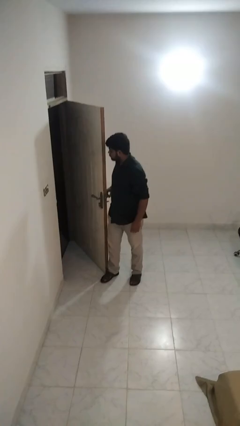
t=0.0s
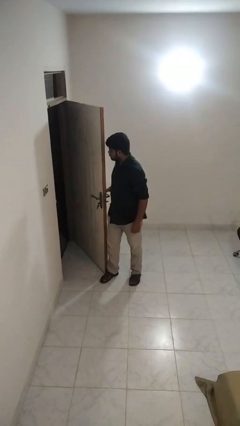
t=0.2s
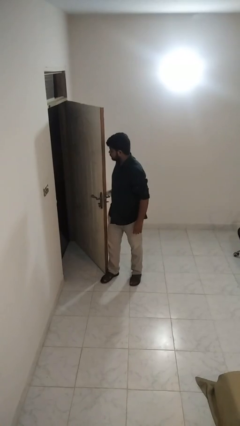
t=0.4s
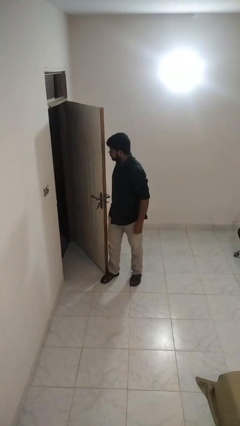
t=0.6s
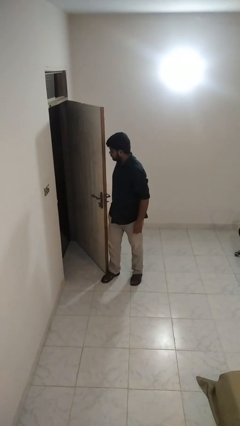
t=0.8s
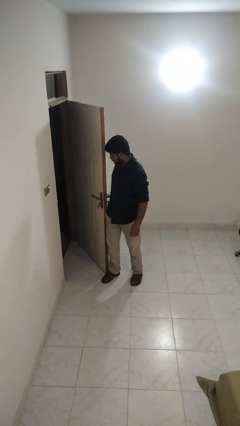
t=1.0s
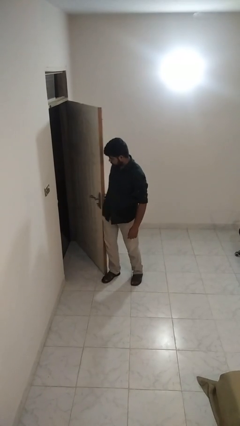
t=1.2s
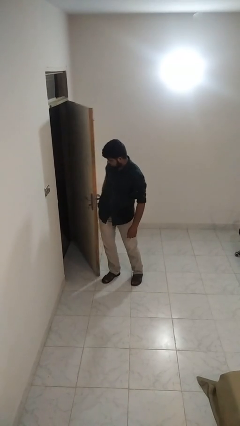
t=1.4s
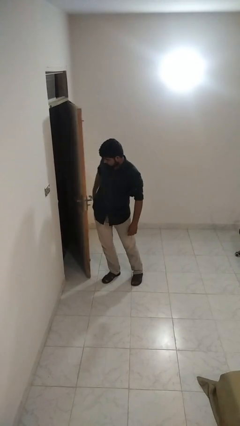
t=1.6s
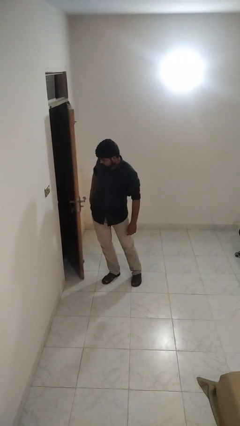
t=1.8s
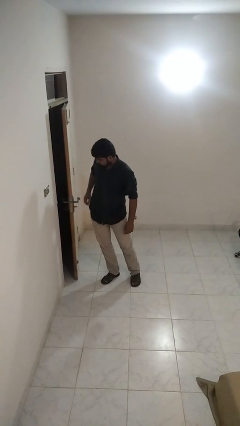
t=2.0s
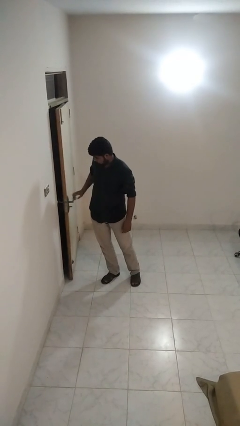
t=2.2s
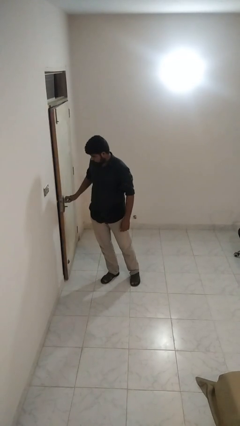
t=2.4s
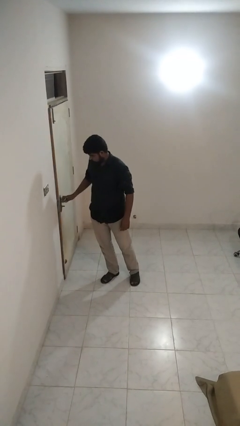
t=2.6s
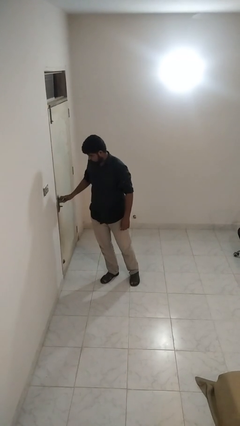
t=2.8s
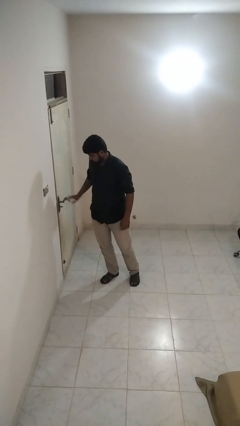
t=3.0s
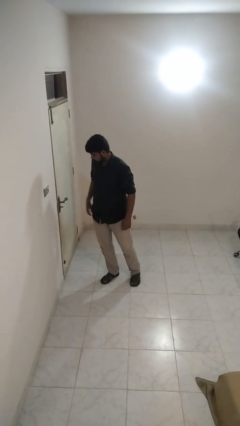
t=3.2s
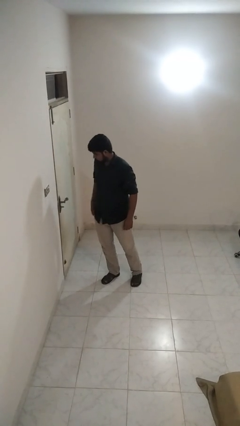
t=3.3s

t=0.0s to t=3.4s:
person closes door with hip

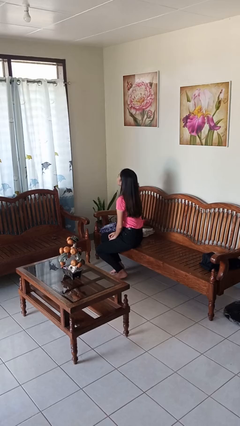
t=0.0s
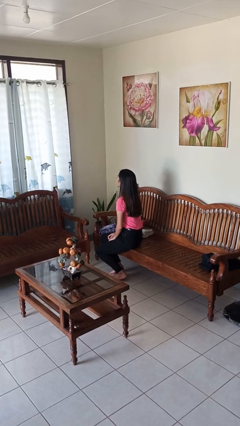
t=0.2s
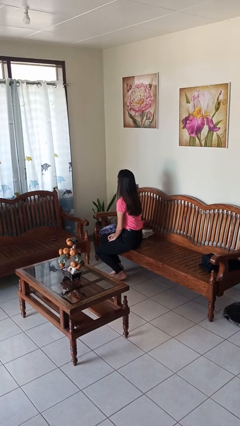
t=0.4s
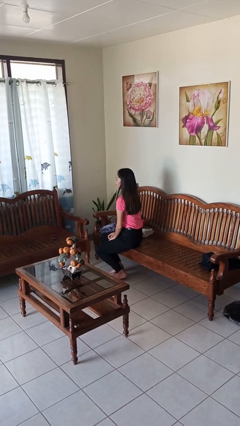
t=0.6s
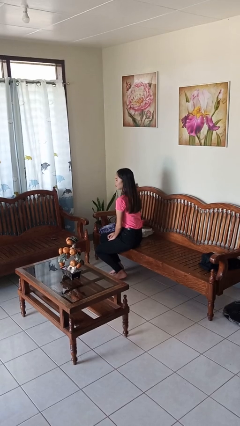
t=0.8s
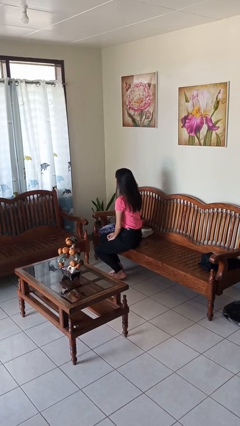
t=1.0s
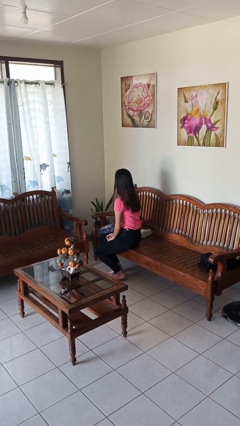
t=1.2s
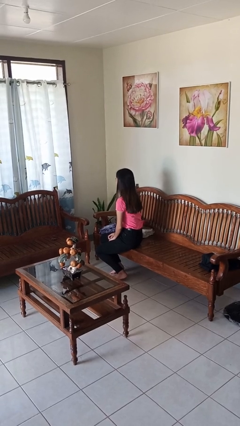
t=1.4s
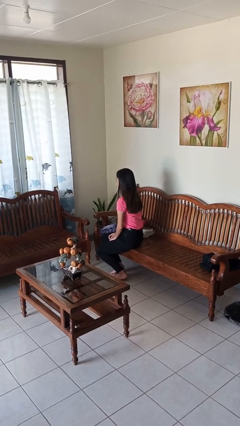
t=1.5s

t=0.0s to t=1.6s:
person shakes head

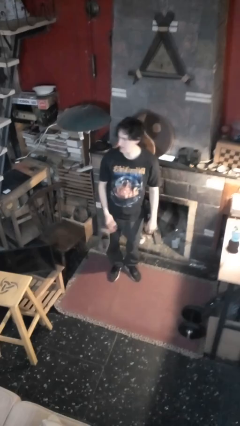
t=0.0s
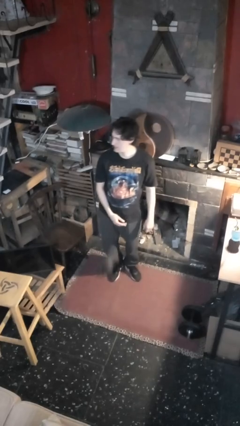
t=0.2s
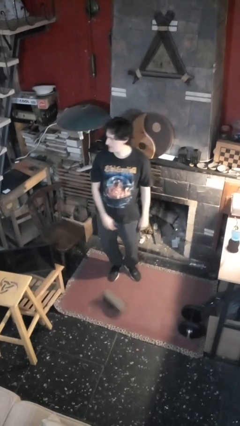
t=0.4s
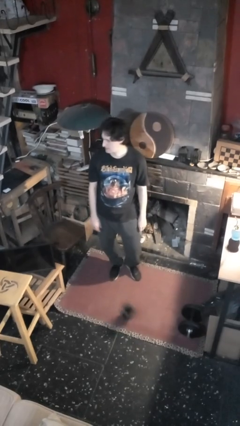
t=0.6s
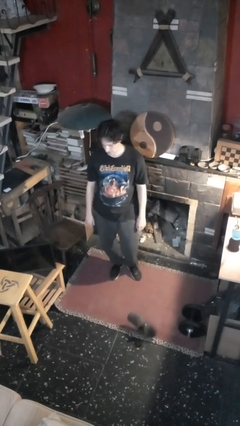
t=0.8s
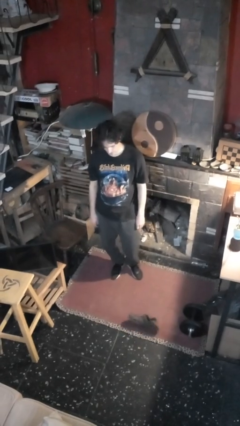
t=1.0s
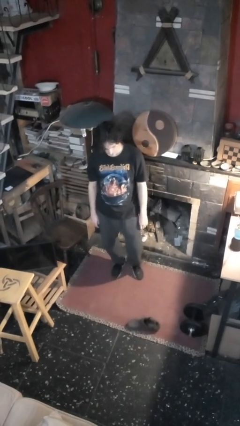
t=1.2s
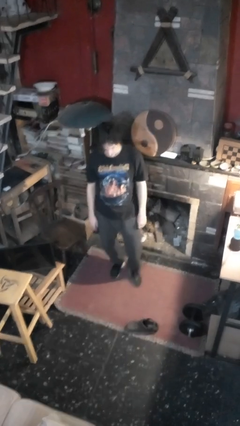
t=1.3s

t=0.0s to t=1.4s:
person drops object

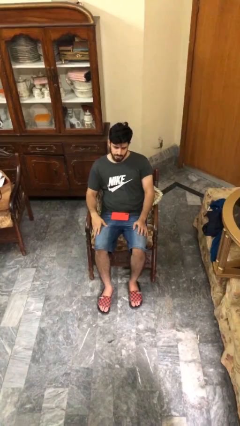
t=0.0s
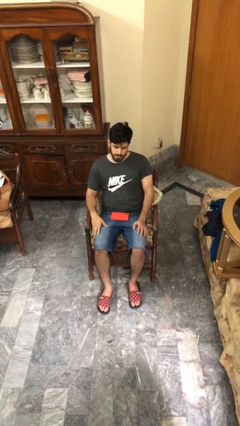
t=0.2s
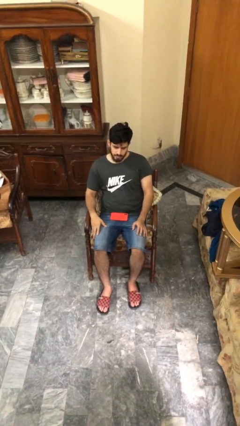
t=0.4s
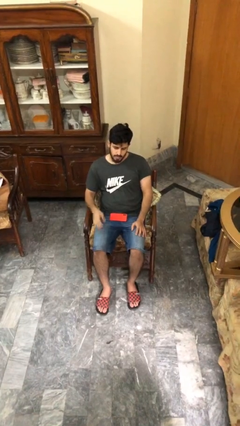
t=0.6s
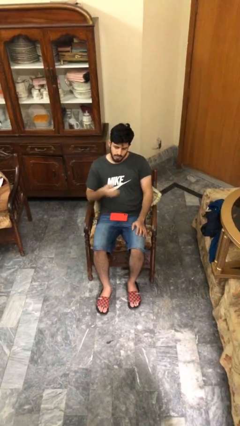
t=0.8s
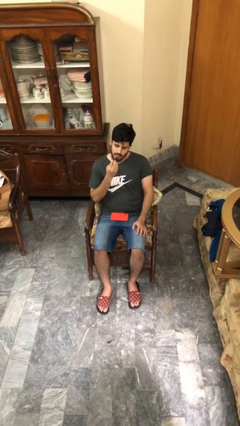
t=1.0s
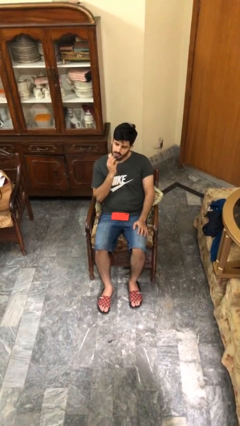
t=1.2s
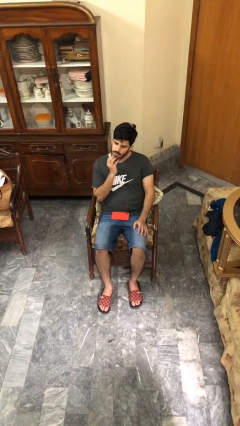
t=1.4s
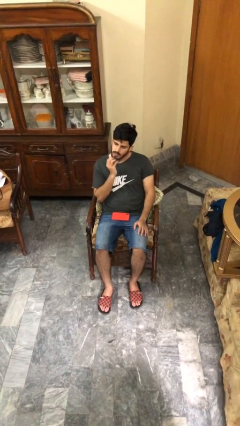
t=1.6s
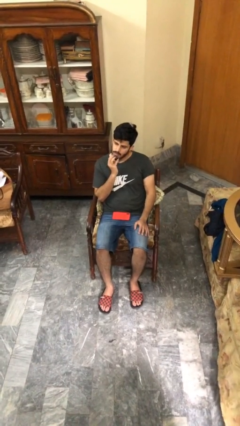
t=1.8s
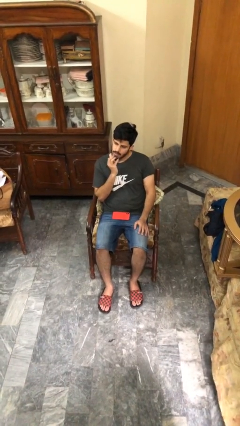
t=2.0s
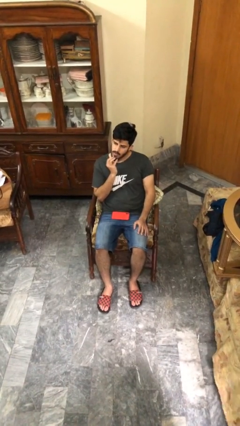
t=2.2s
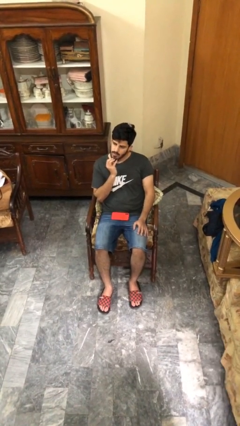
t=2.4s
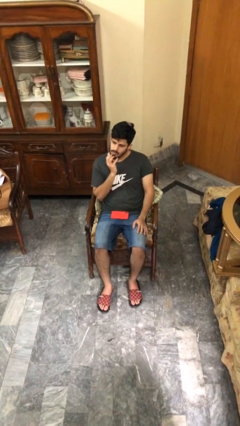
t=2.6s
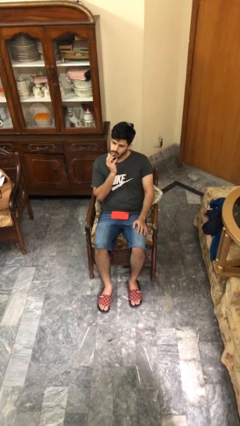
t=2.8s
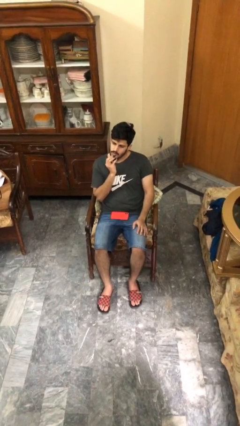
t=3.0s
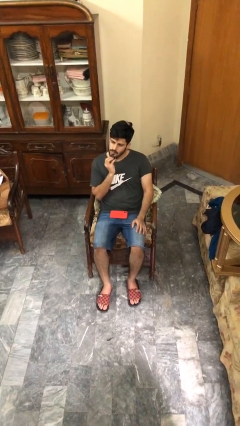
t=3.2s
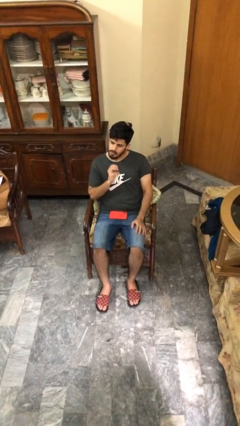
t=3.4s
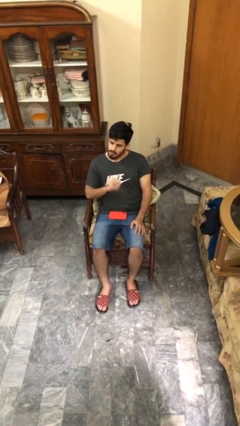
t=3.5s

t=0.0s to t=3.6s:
person strokes chin

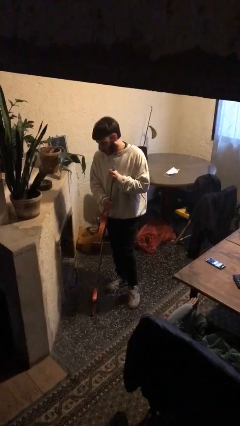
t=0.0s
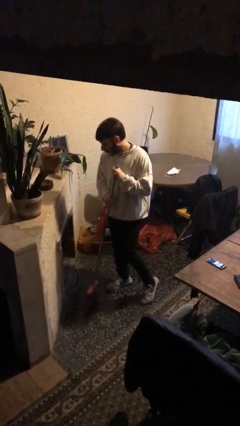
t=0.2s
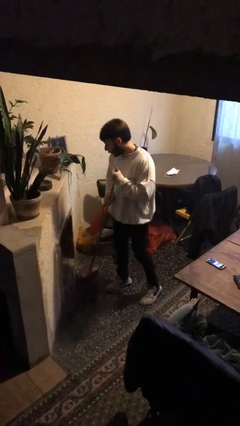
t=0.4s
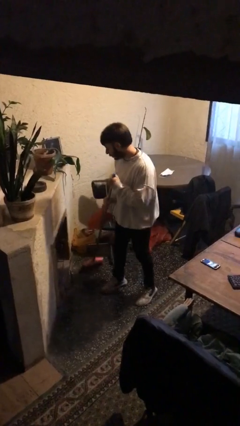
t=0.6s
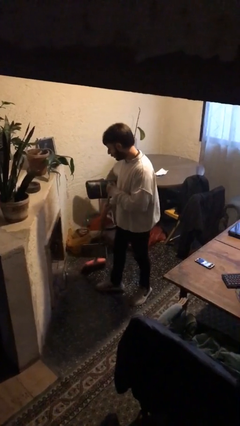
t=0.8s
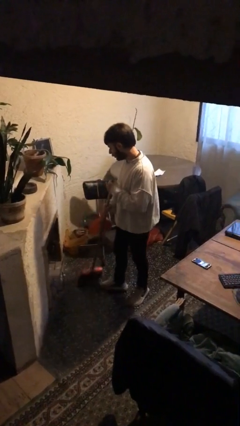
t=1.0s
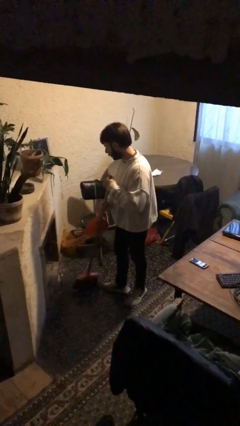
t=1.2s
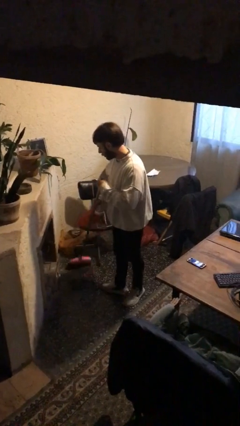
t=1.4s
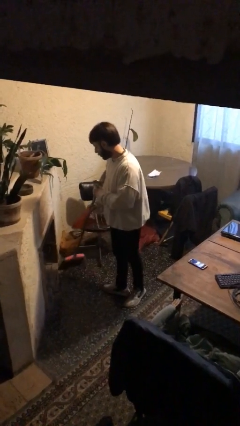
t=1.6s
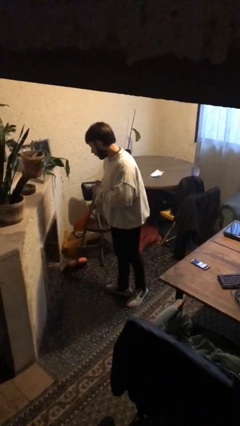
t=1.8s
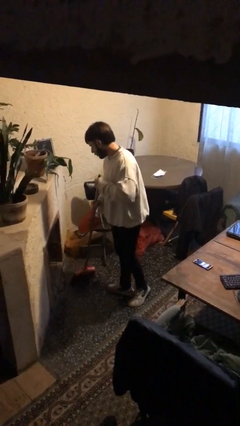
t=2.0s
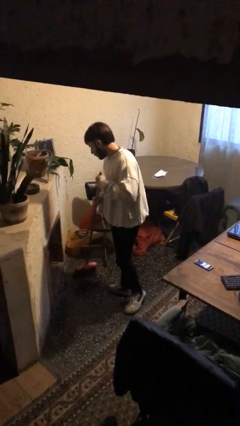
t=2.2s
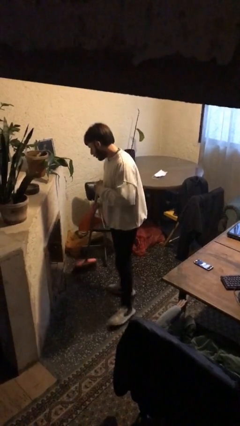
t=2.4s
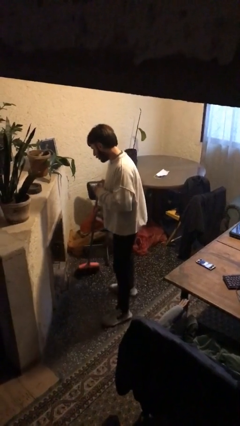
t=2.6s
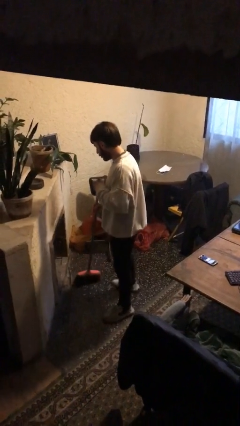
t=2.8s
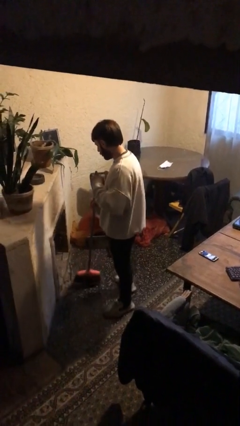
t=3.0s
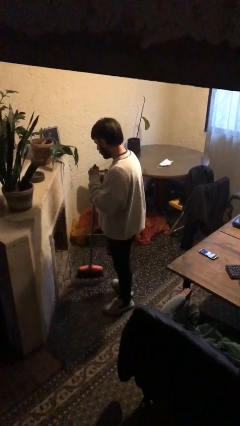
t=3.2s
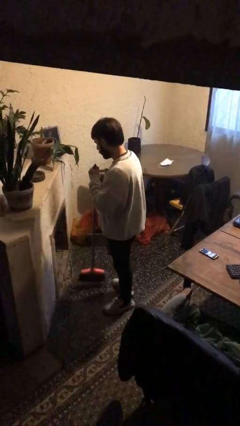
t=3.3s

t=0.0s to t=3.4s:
person sweeps floor

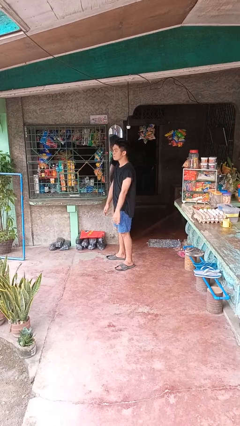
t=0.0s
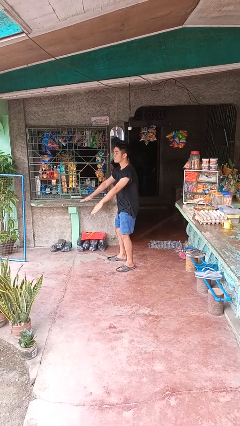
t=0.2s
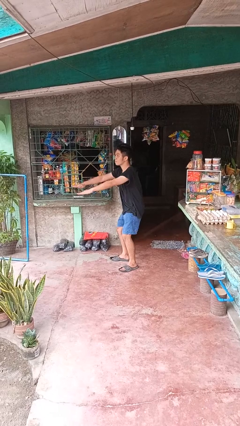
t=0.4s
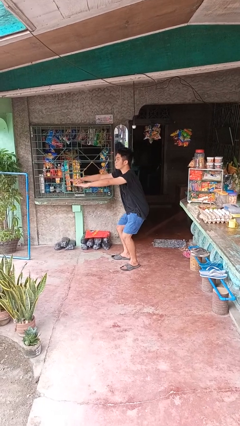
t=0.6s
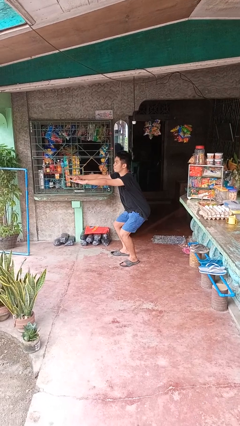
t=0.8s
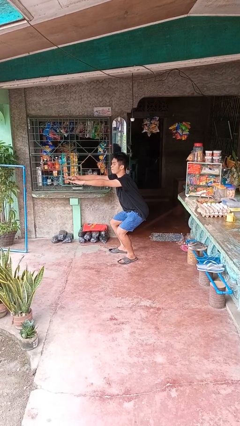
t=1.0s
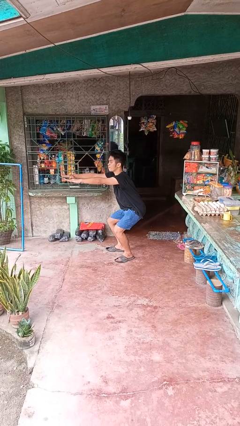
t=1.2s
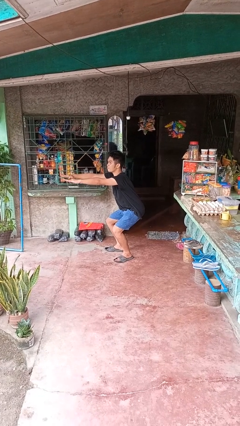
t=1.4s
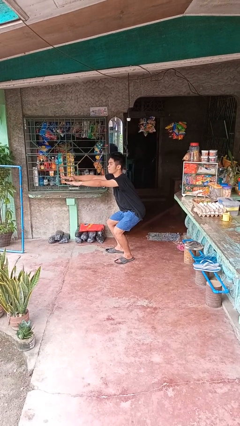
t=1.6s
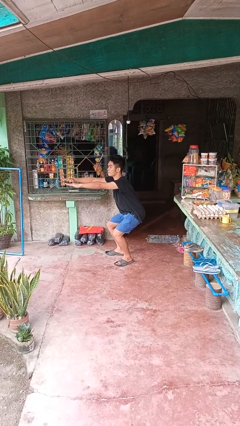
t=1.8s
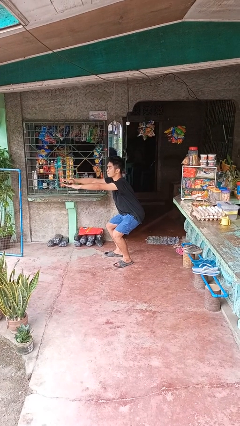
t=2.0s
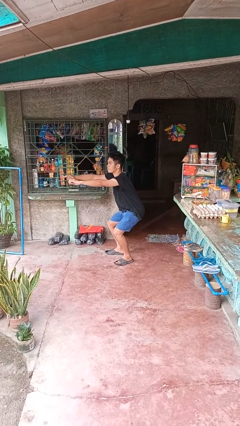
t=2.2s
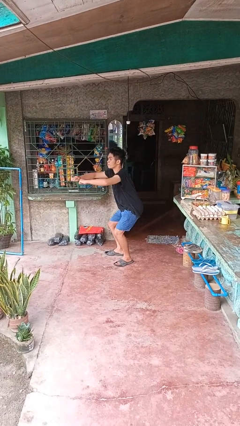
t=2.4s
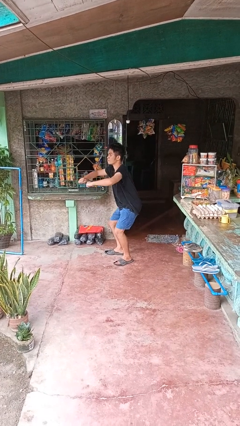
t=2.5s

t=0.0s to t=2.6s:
person squats

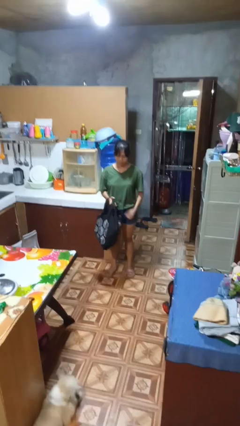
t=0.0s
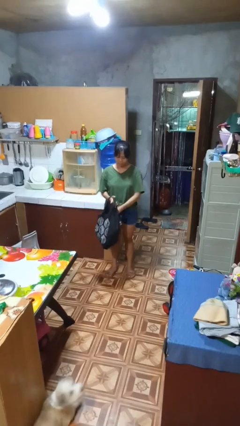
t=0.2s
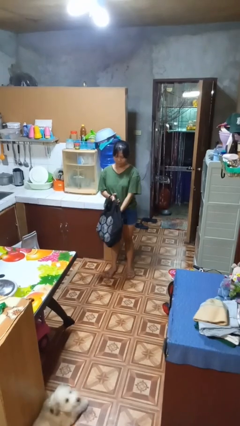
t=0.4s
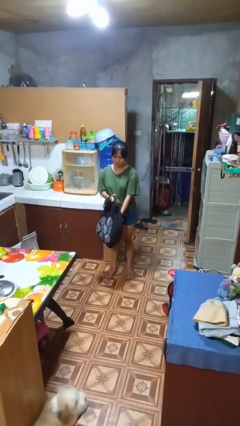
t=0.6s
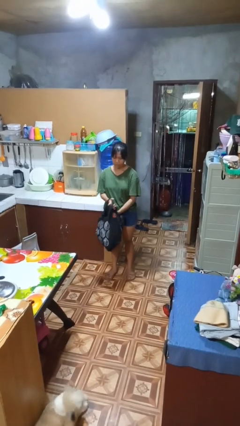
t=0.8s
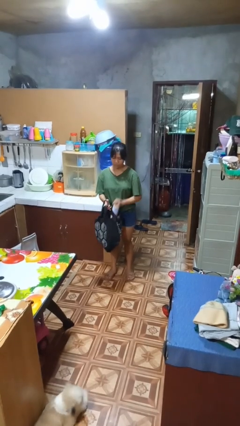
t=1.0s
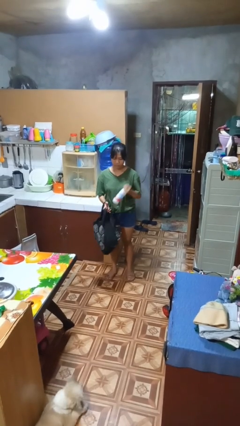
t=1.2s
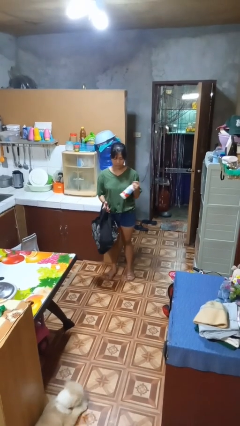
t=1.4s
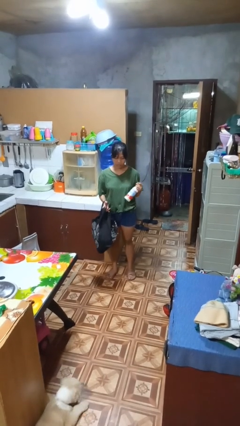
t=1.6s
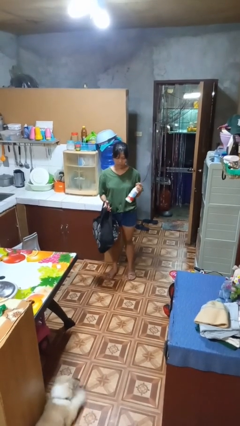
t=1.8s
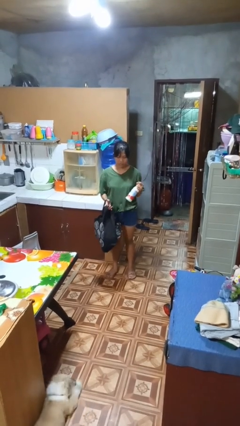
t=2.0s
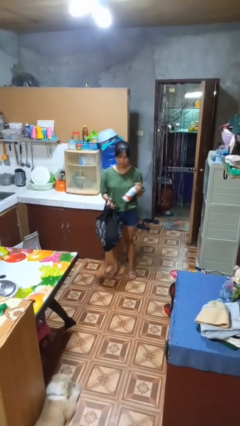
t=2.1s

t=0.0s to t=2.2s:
person takes object from bag
